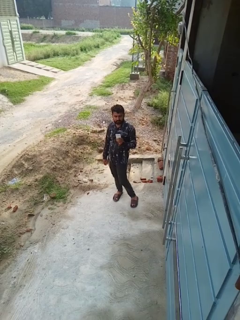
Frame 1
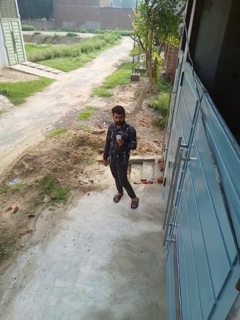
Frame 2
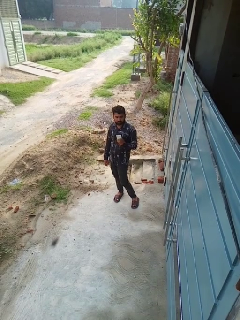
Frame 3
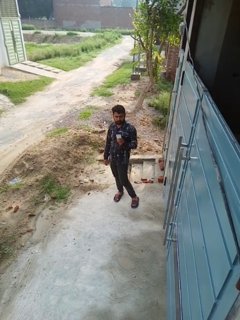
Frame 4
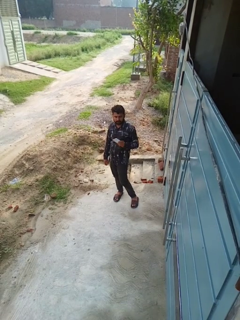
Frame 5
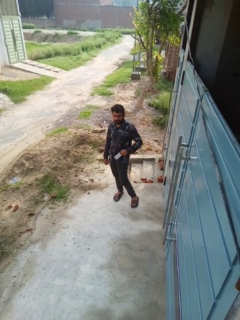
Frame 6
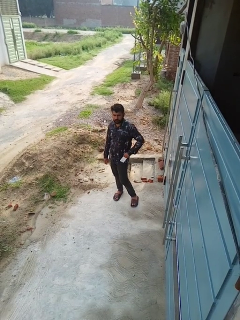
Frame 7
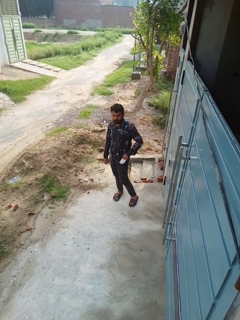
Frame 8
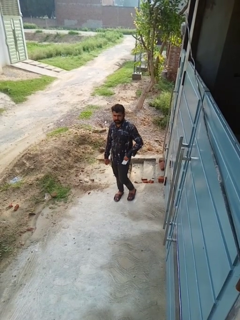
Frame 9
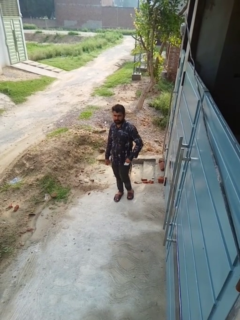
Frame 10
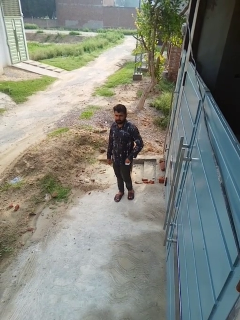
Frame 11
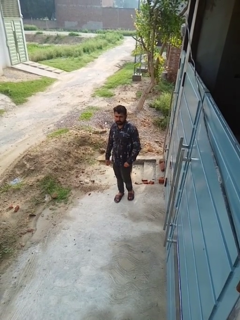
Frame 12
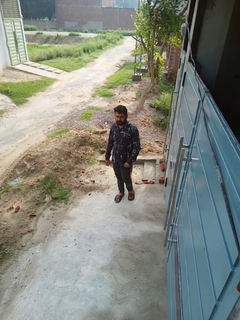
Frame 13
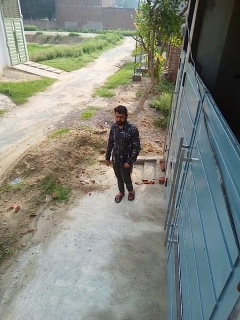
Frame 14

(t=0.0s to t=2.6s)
person puts phone into pocket

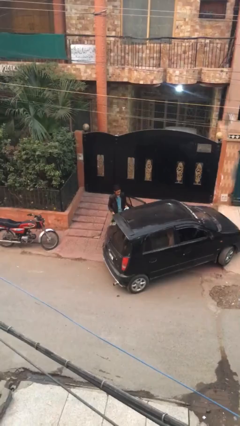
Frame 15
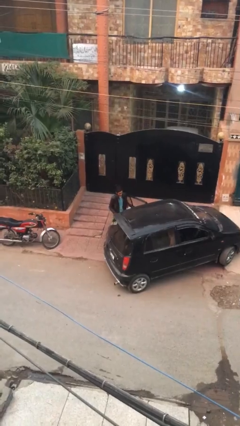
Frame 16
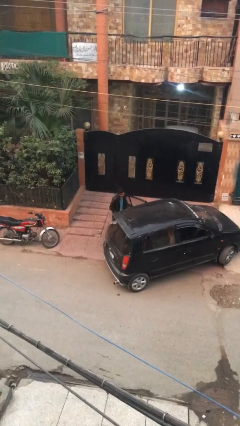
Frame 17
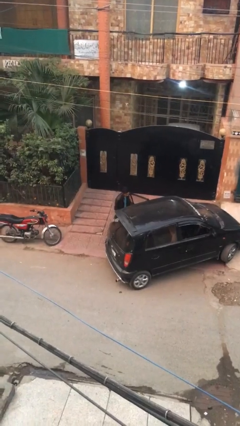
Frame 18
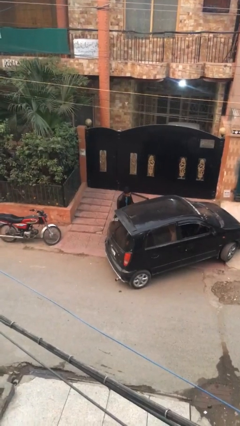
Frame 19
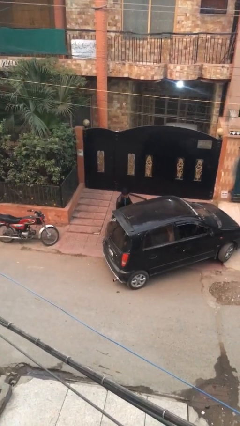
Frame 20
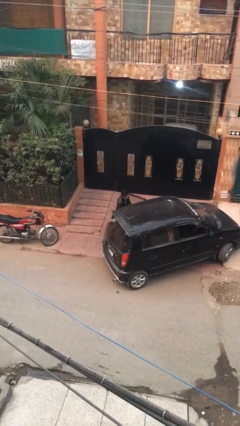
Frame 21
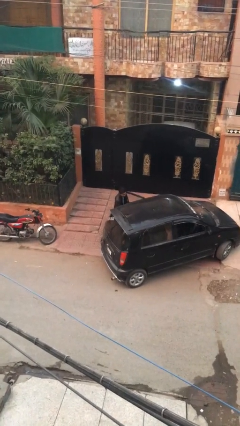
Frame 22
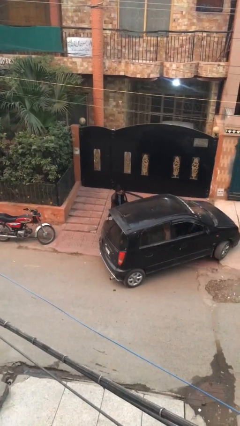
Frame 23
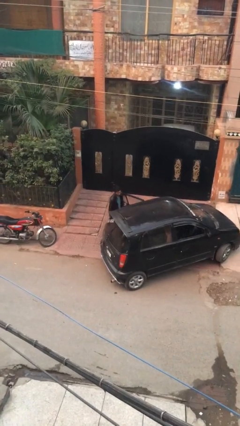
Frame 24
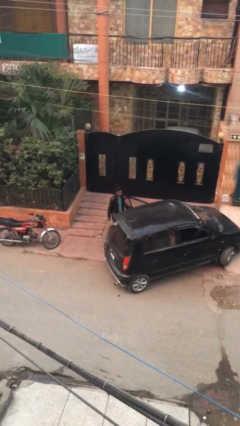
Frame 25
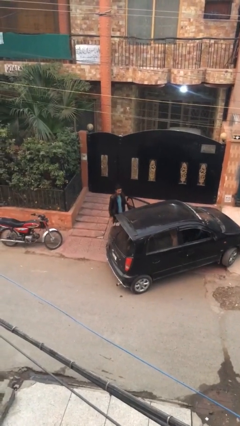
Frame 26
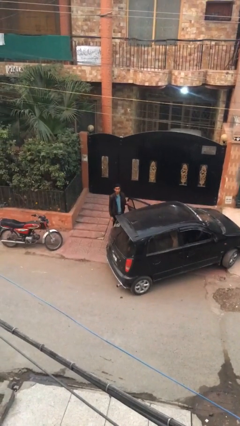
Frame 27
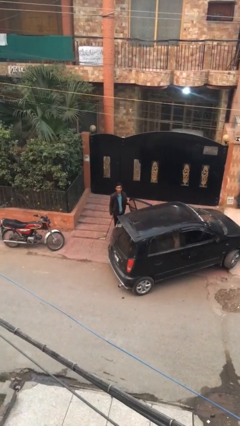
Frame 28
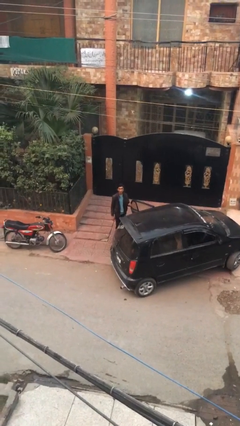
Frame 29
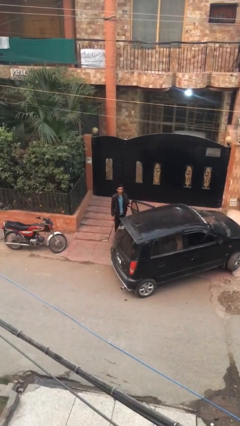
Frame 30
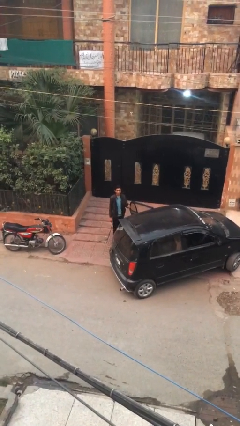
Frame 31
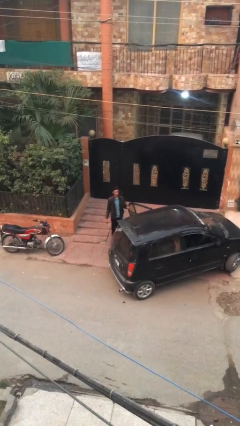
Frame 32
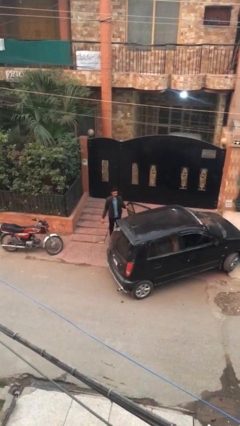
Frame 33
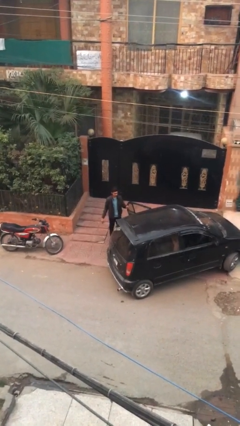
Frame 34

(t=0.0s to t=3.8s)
person loads car

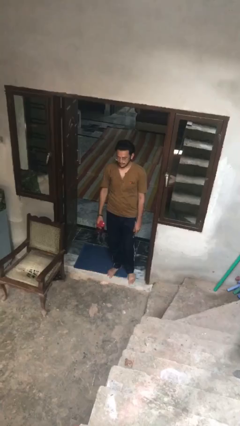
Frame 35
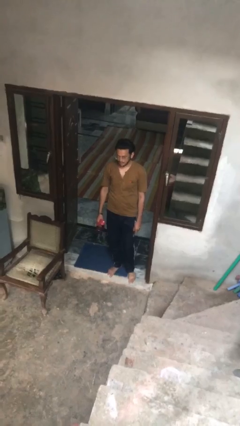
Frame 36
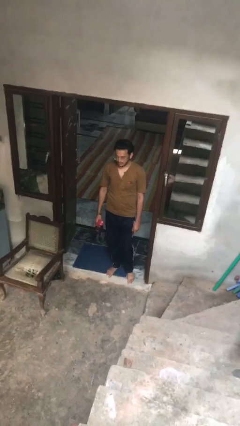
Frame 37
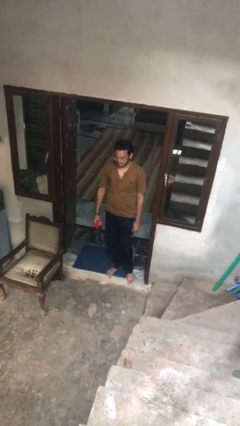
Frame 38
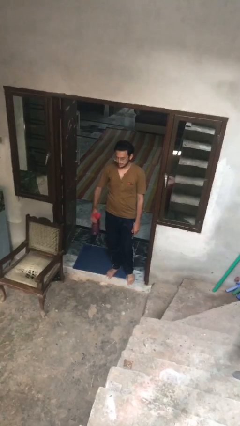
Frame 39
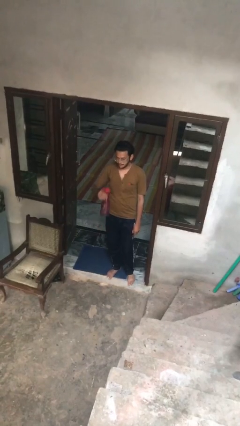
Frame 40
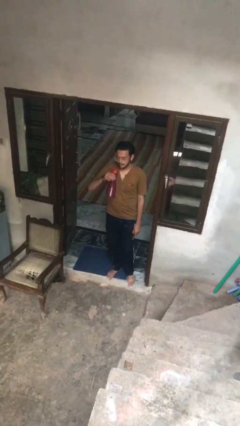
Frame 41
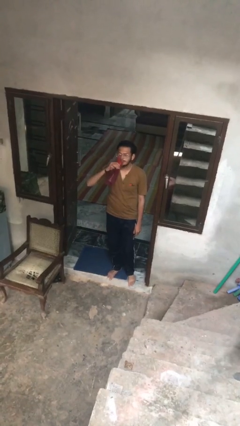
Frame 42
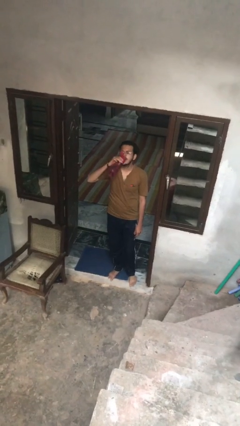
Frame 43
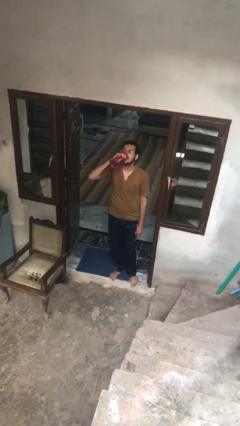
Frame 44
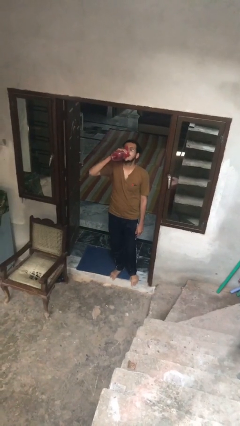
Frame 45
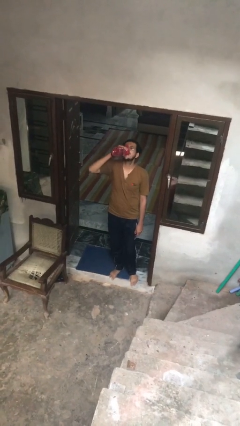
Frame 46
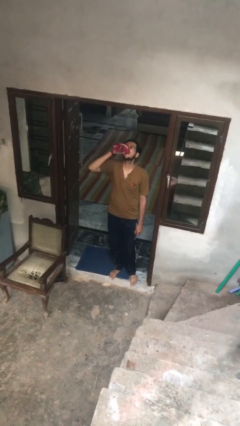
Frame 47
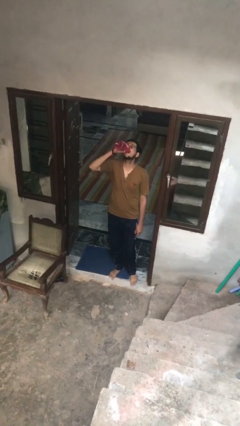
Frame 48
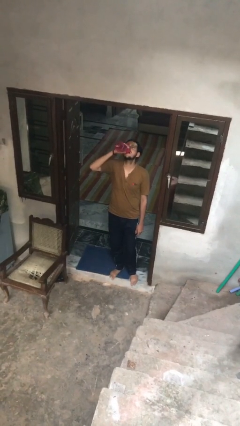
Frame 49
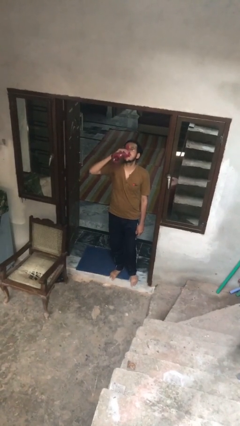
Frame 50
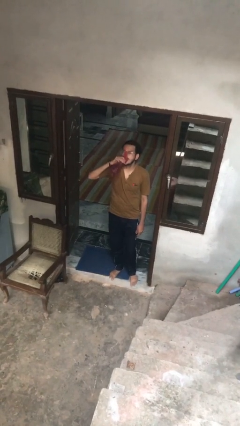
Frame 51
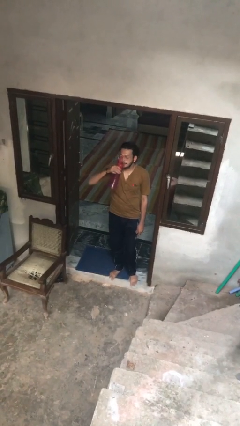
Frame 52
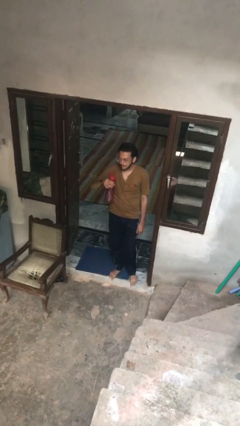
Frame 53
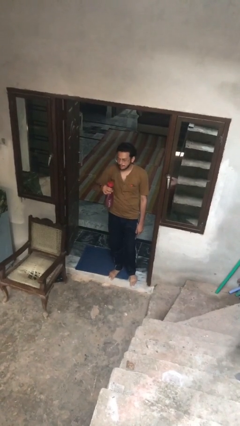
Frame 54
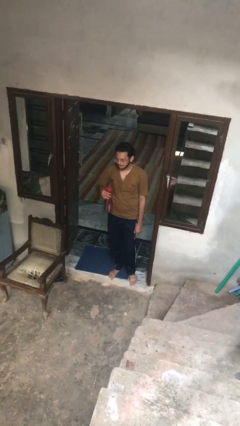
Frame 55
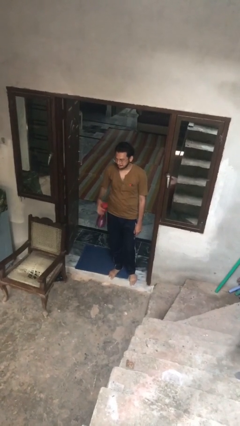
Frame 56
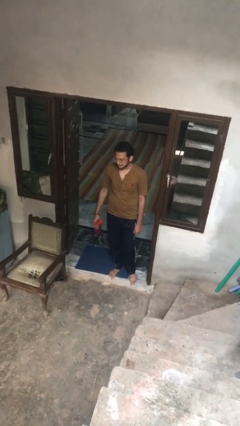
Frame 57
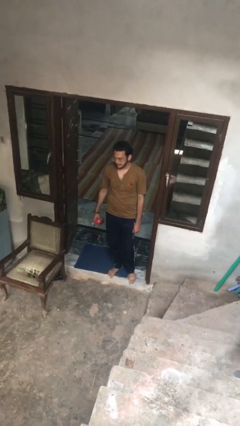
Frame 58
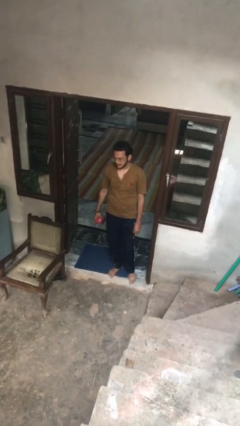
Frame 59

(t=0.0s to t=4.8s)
person drinks from bottle

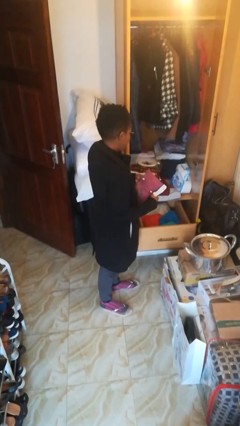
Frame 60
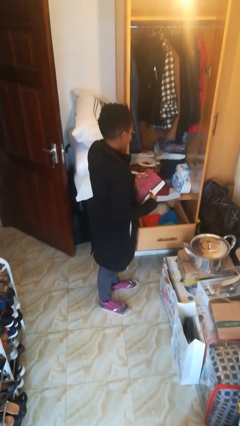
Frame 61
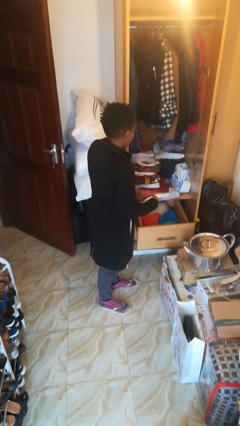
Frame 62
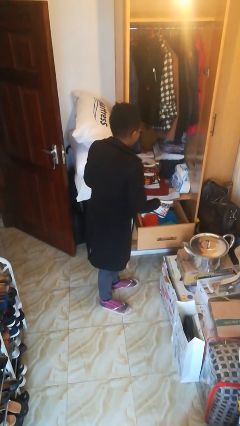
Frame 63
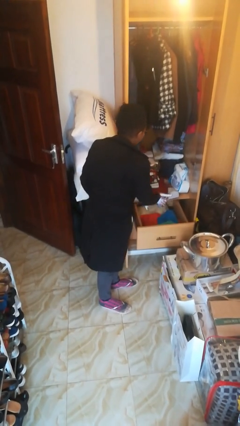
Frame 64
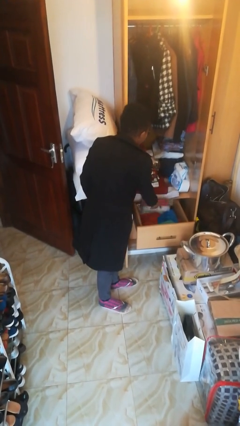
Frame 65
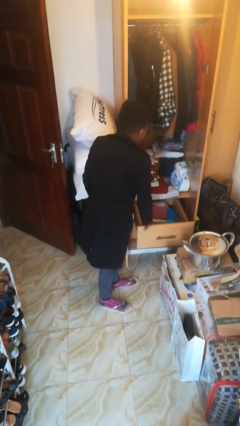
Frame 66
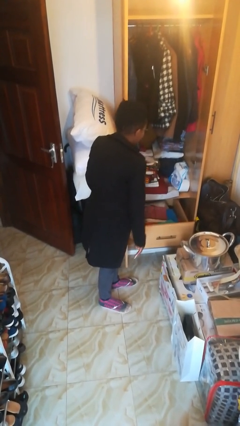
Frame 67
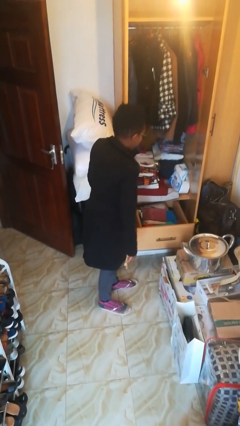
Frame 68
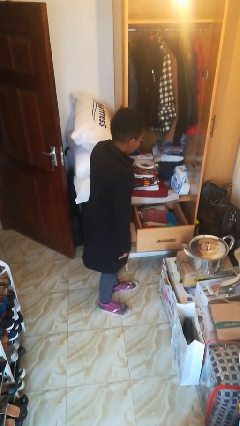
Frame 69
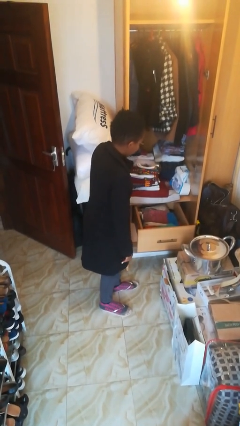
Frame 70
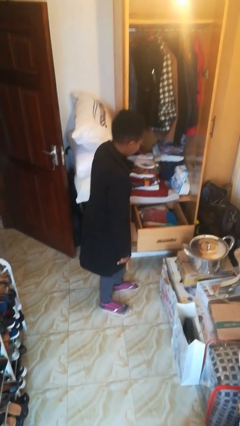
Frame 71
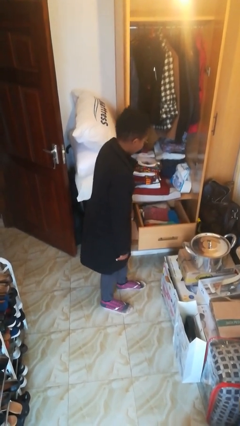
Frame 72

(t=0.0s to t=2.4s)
person puts clothes into dresser

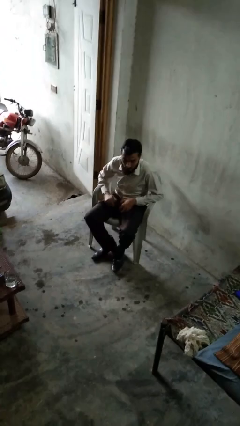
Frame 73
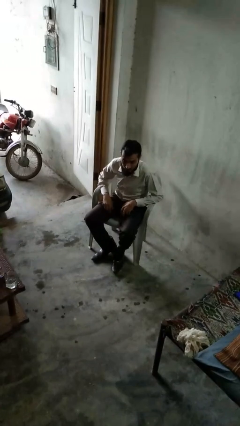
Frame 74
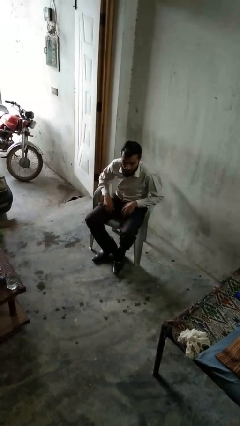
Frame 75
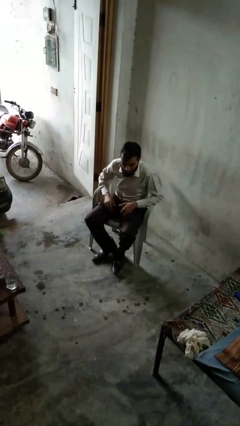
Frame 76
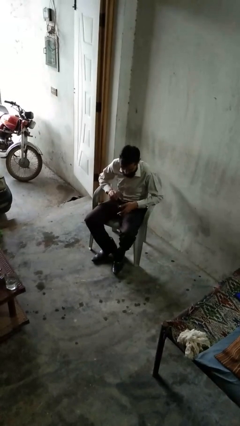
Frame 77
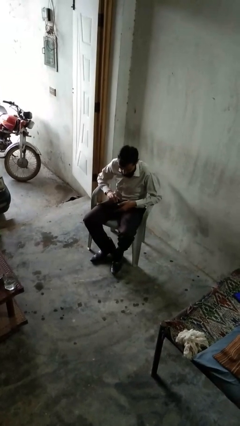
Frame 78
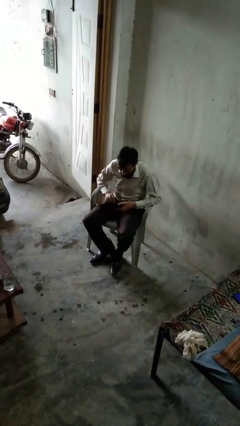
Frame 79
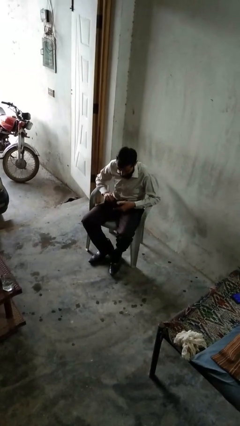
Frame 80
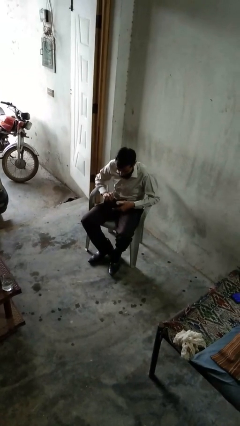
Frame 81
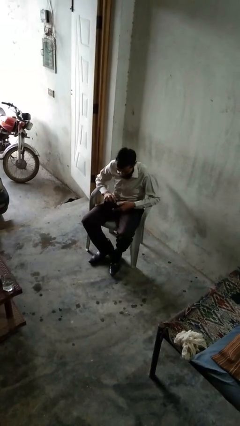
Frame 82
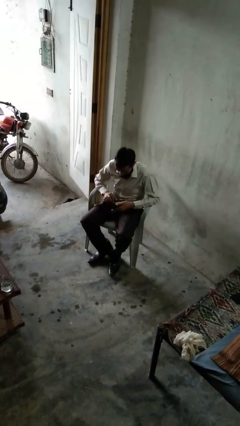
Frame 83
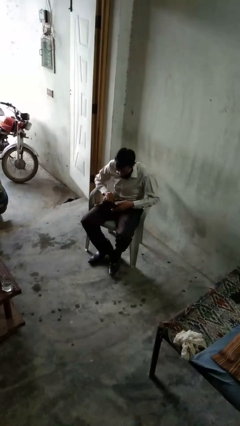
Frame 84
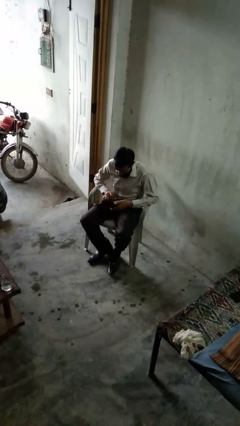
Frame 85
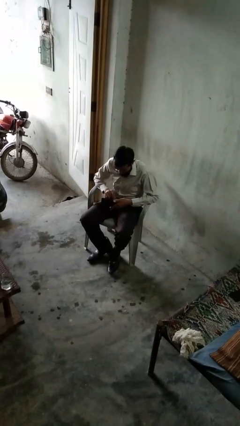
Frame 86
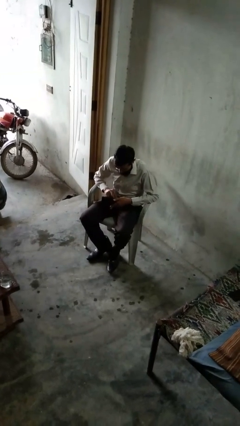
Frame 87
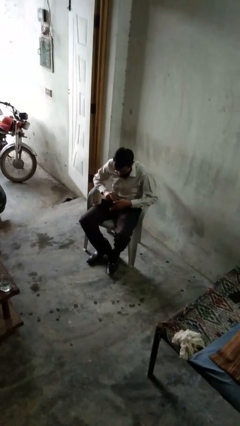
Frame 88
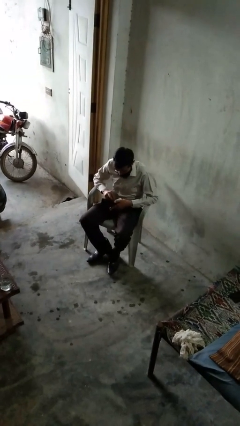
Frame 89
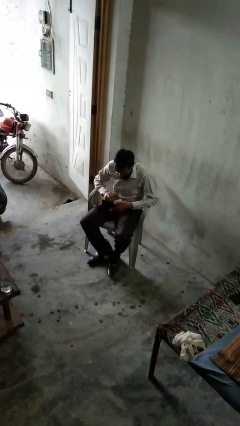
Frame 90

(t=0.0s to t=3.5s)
person searches in purse

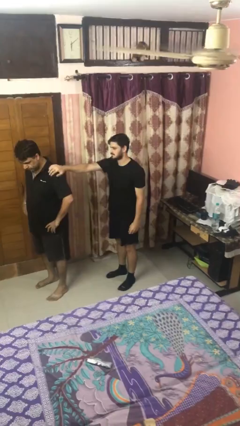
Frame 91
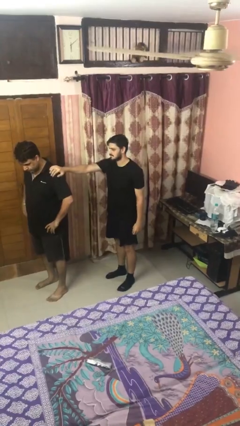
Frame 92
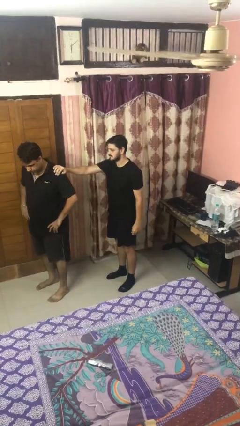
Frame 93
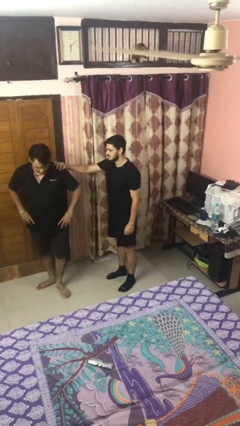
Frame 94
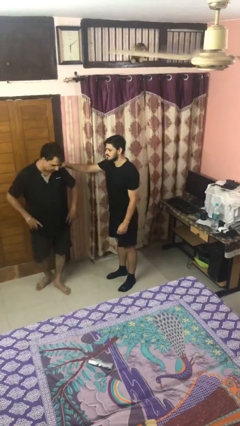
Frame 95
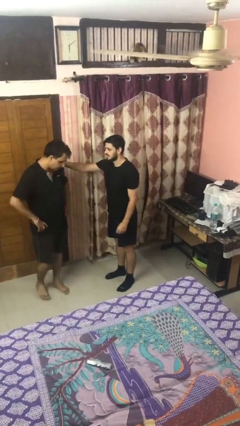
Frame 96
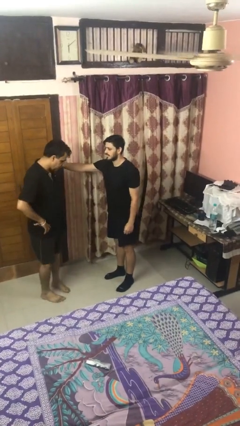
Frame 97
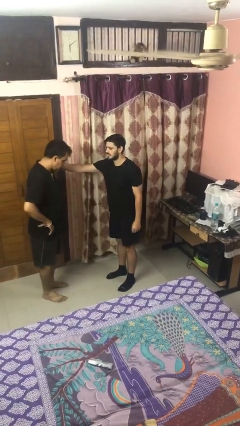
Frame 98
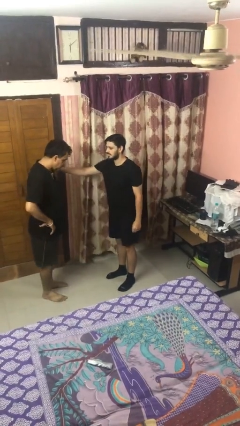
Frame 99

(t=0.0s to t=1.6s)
person spins person around
